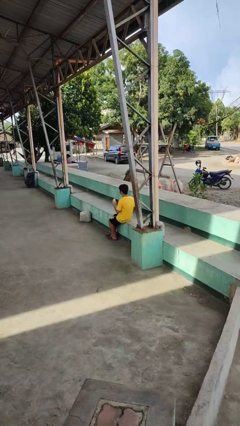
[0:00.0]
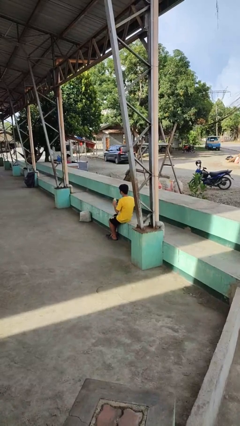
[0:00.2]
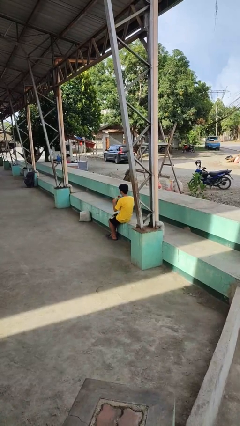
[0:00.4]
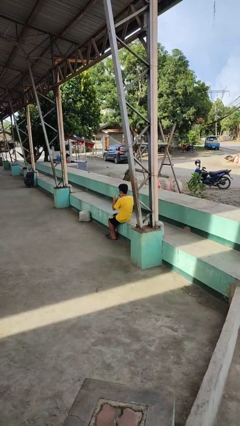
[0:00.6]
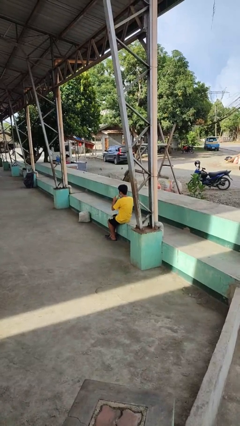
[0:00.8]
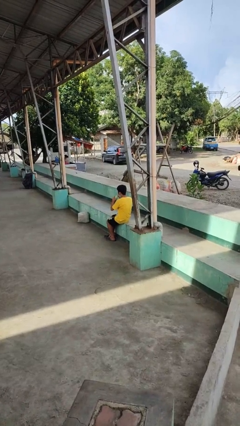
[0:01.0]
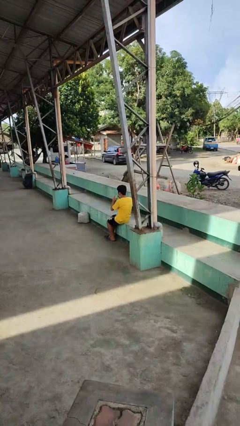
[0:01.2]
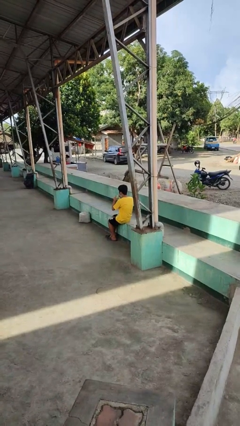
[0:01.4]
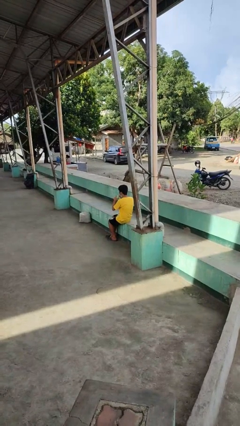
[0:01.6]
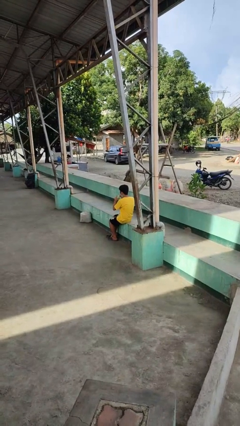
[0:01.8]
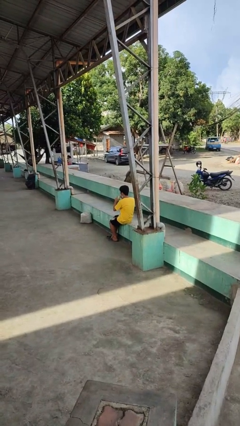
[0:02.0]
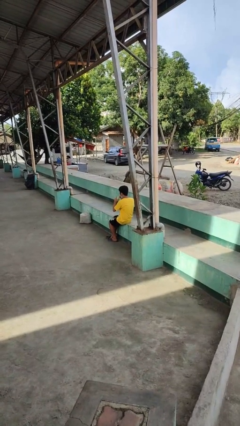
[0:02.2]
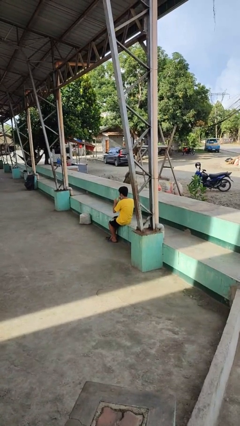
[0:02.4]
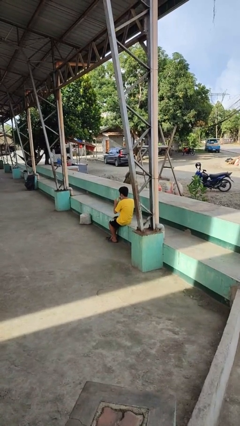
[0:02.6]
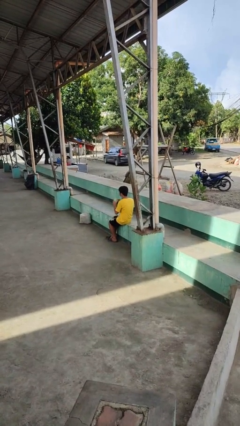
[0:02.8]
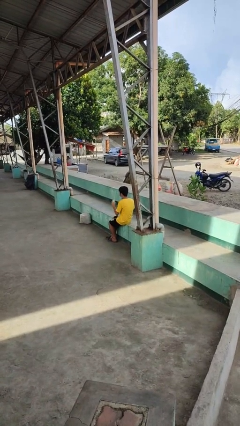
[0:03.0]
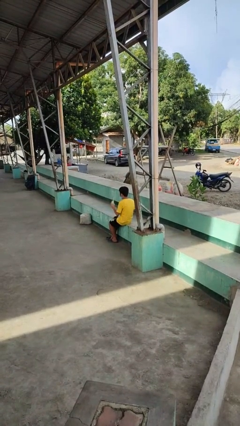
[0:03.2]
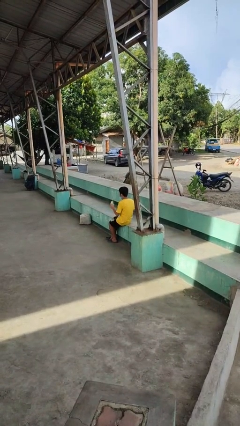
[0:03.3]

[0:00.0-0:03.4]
person drinks from straw

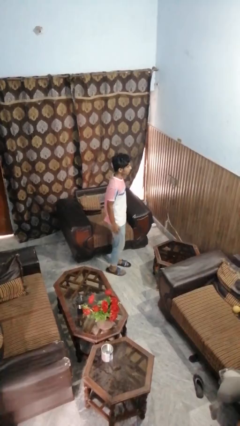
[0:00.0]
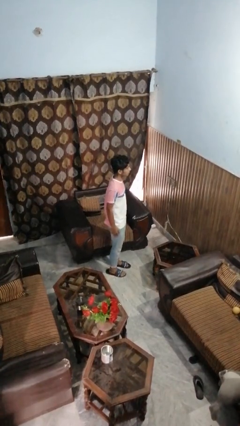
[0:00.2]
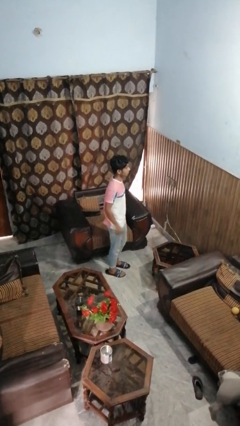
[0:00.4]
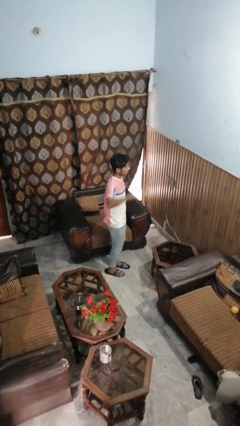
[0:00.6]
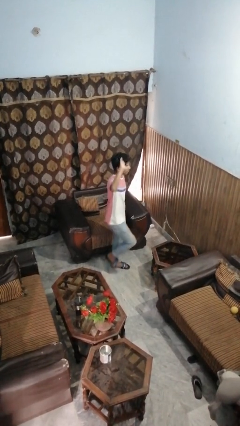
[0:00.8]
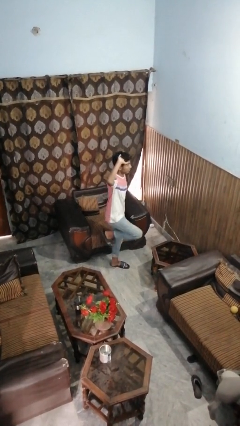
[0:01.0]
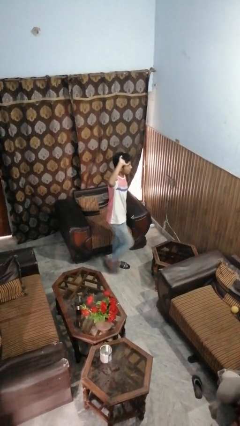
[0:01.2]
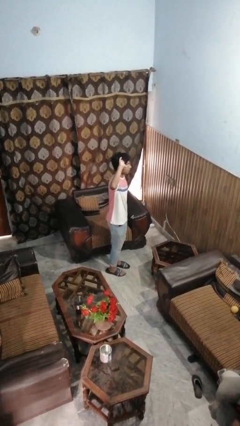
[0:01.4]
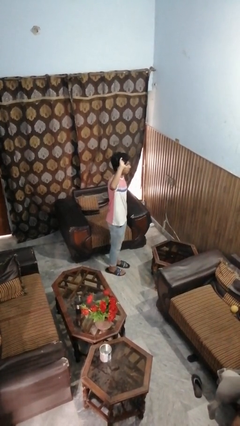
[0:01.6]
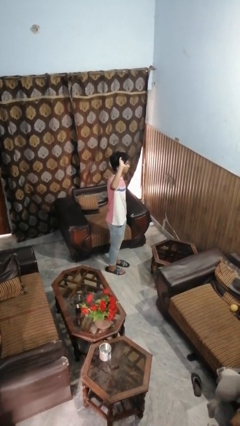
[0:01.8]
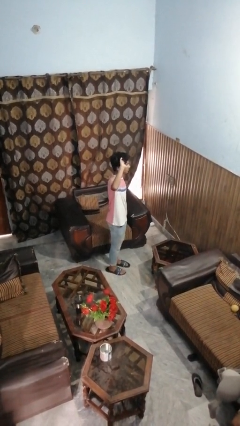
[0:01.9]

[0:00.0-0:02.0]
person salutes

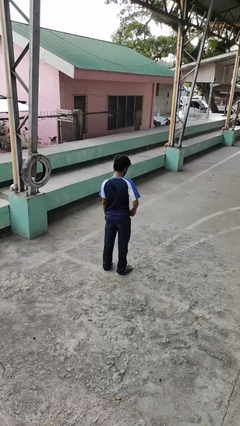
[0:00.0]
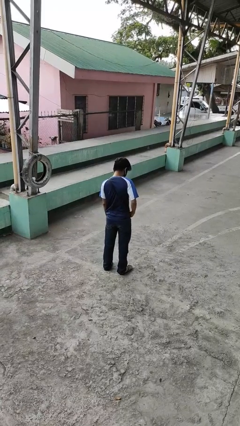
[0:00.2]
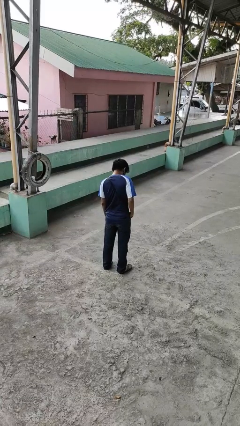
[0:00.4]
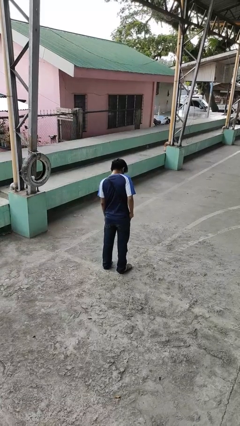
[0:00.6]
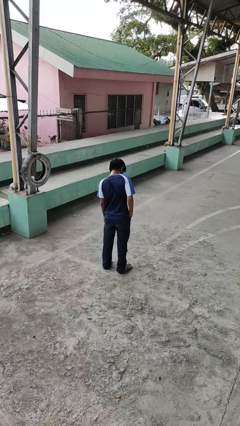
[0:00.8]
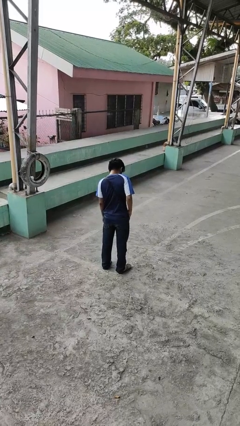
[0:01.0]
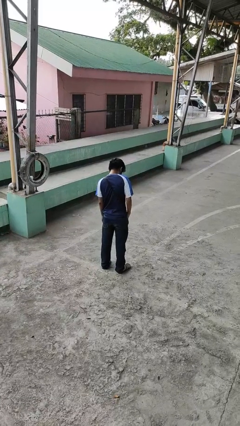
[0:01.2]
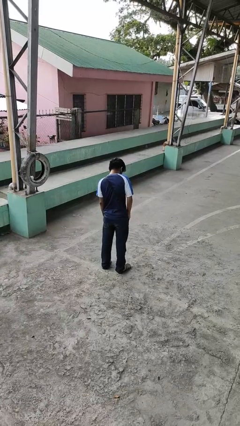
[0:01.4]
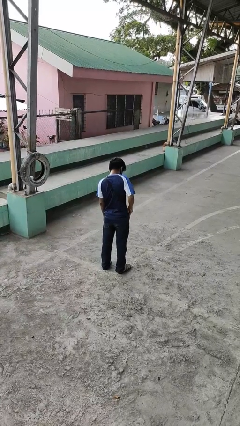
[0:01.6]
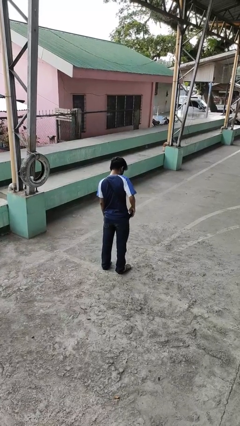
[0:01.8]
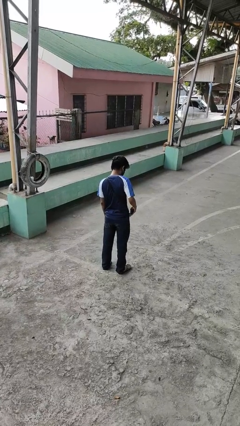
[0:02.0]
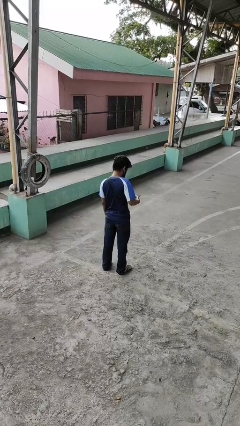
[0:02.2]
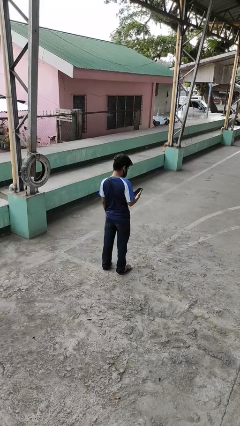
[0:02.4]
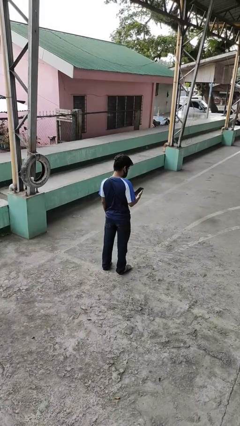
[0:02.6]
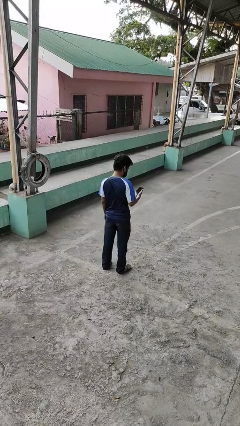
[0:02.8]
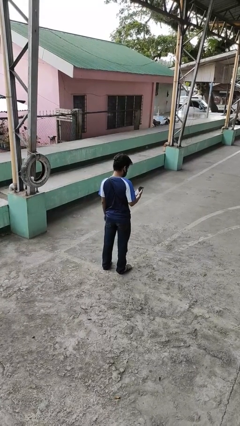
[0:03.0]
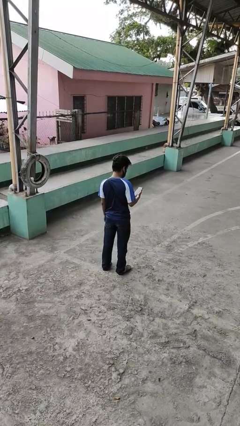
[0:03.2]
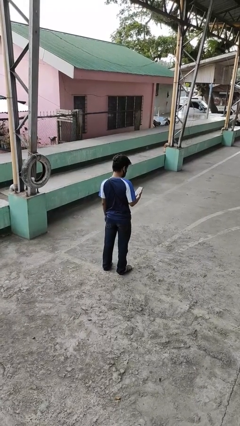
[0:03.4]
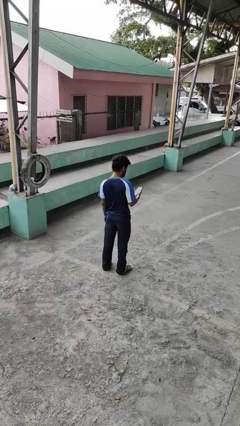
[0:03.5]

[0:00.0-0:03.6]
person takes phone from pocket

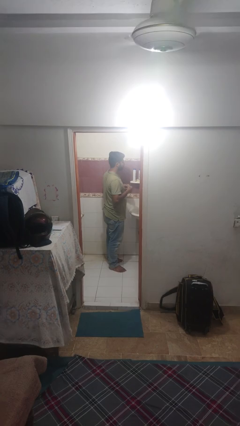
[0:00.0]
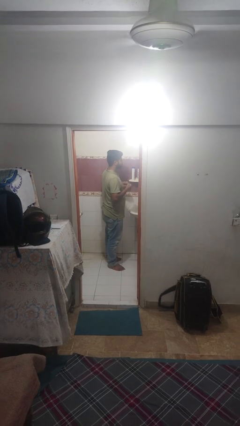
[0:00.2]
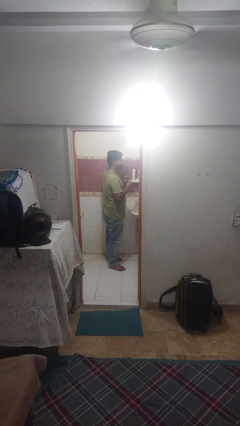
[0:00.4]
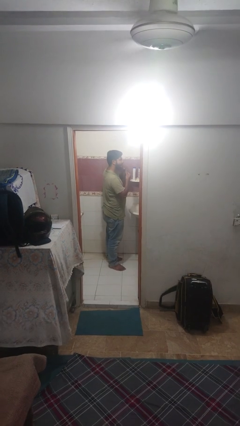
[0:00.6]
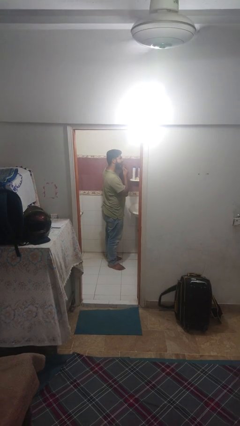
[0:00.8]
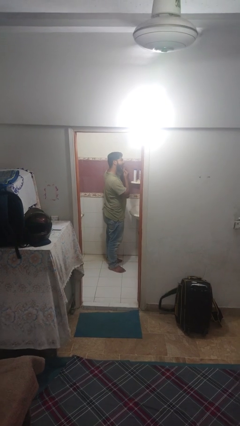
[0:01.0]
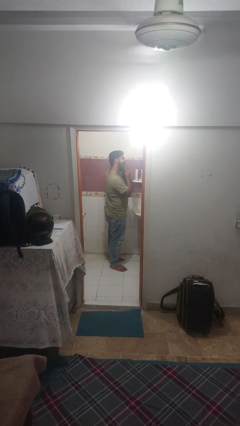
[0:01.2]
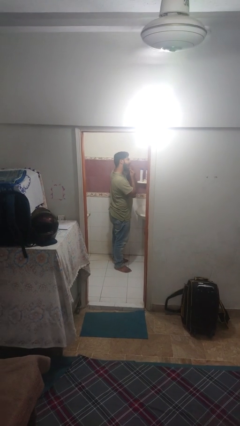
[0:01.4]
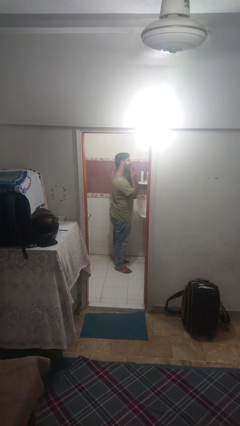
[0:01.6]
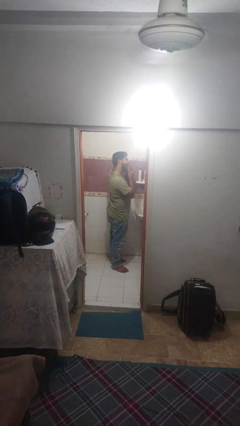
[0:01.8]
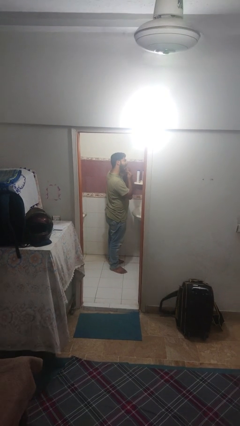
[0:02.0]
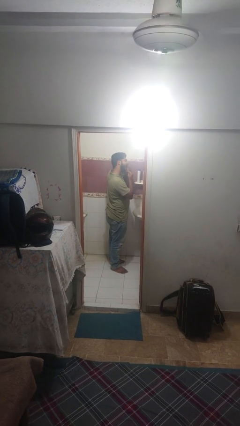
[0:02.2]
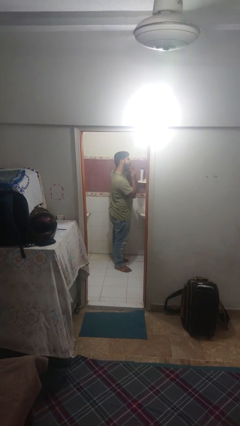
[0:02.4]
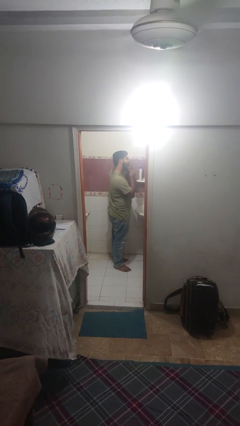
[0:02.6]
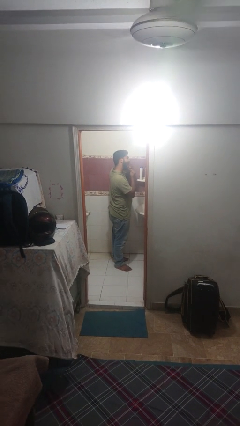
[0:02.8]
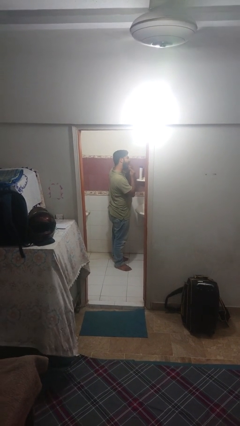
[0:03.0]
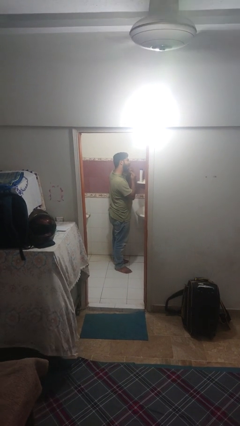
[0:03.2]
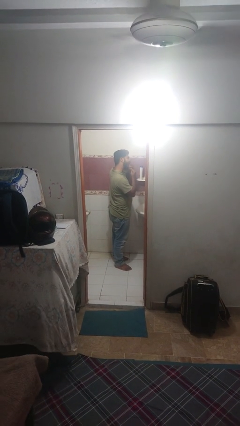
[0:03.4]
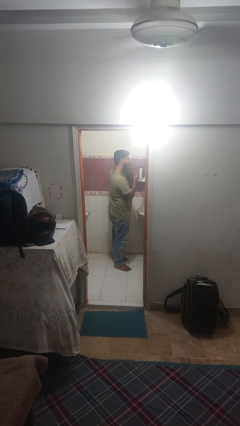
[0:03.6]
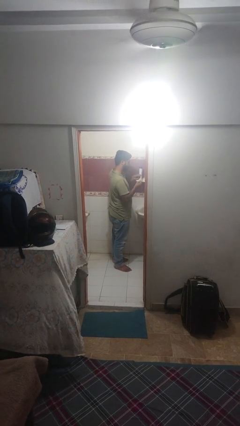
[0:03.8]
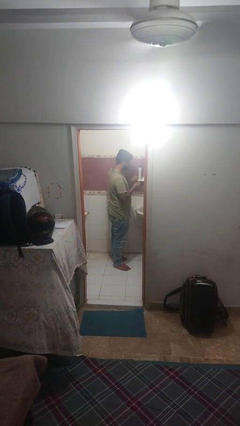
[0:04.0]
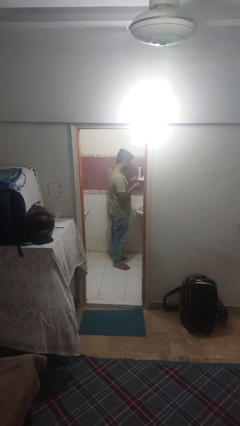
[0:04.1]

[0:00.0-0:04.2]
person flosses

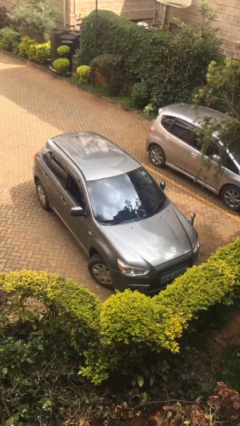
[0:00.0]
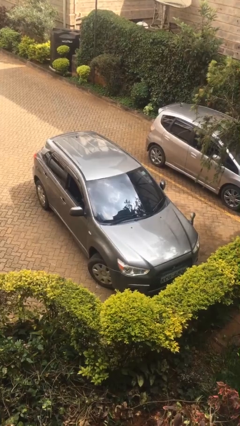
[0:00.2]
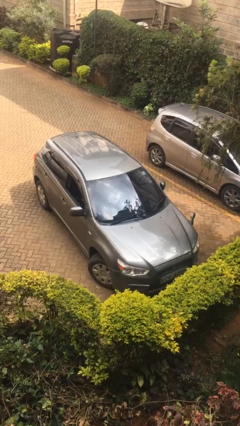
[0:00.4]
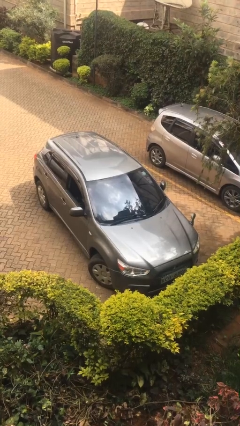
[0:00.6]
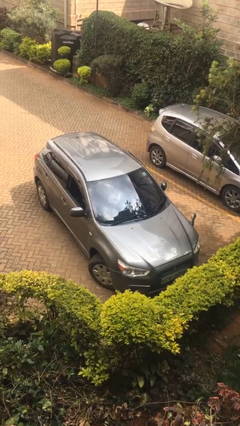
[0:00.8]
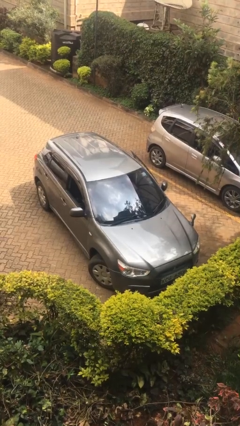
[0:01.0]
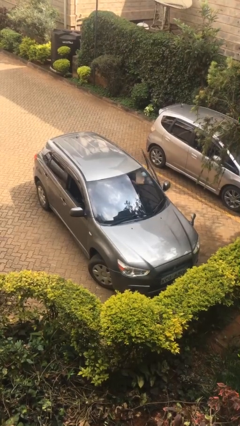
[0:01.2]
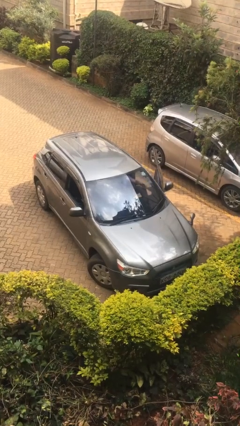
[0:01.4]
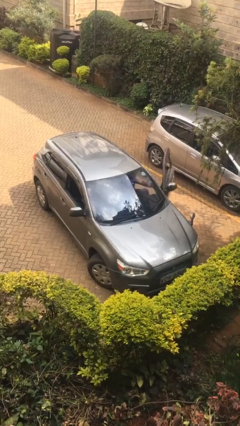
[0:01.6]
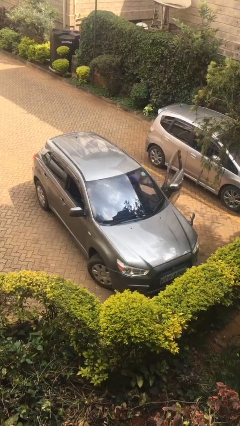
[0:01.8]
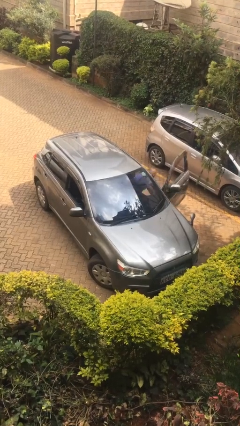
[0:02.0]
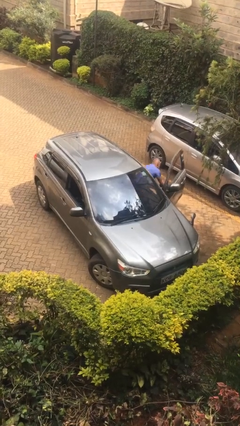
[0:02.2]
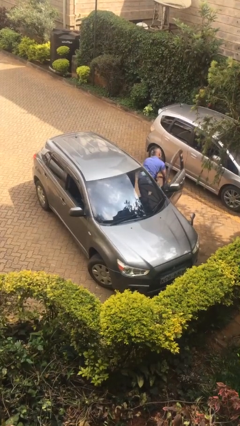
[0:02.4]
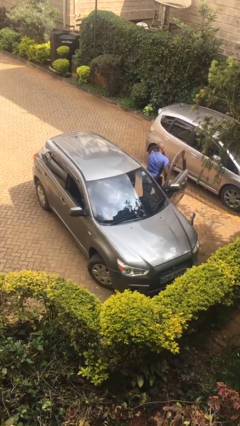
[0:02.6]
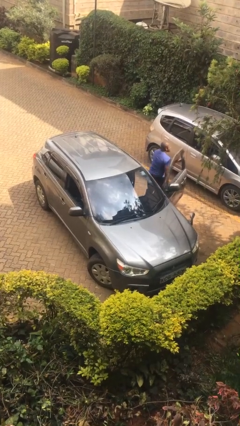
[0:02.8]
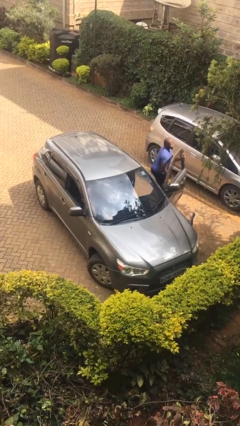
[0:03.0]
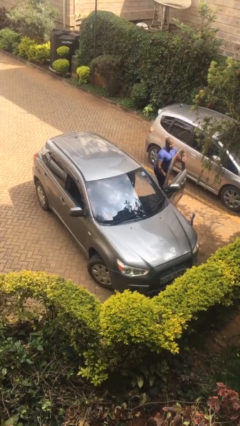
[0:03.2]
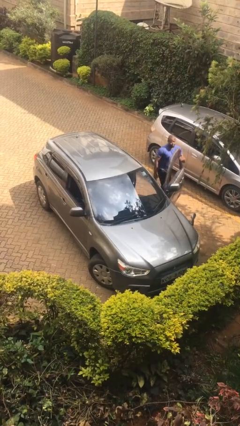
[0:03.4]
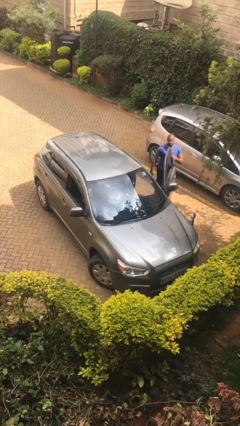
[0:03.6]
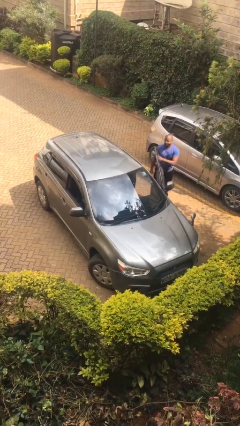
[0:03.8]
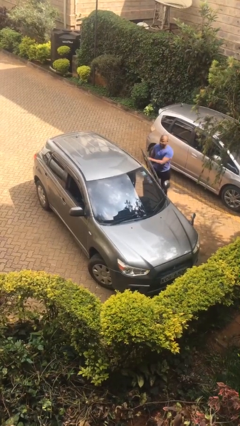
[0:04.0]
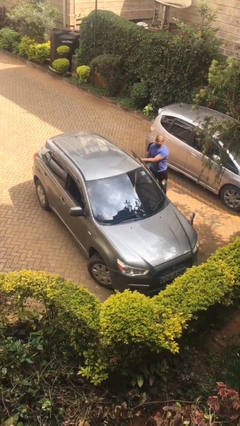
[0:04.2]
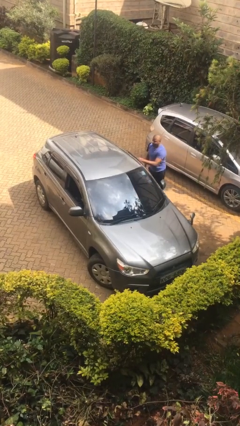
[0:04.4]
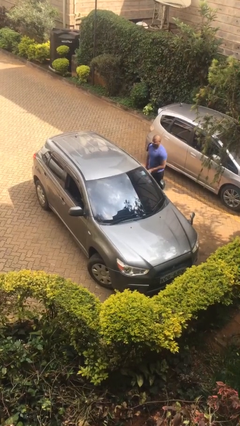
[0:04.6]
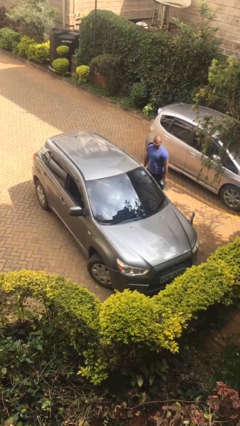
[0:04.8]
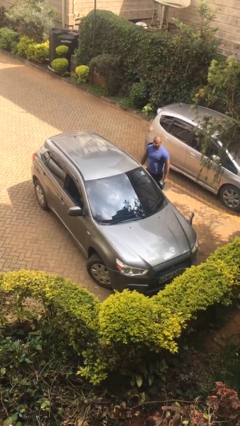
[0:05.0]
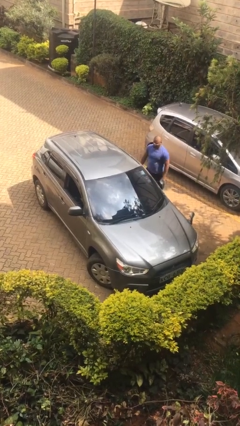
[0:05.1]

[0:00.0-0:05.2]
car drops off person
